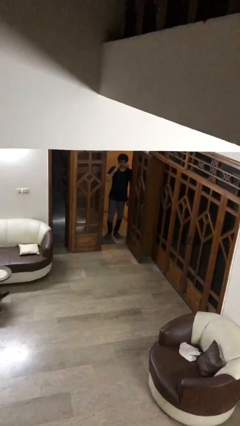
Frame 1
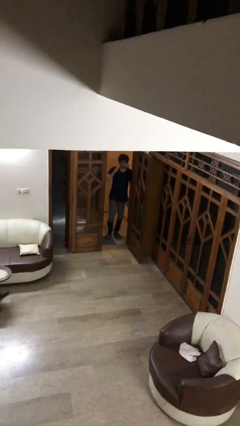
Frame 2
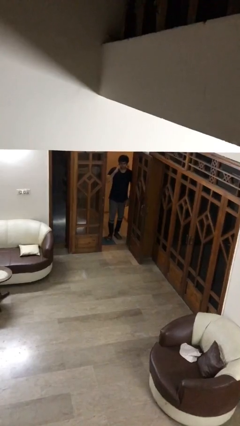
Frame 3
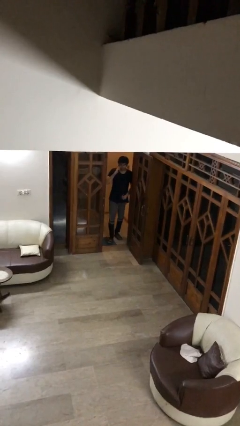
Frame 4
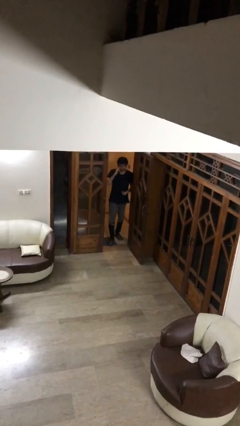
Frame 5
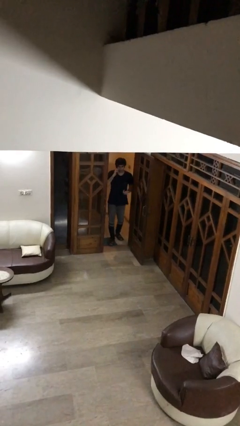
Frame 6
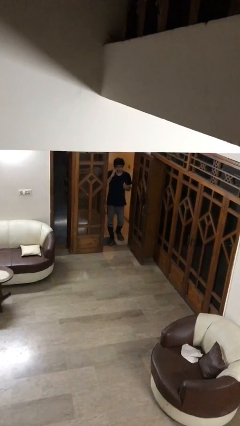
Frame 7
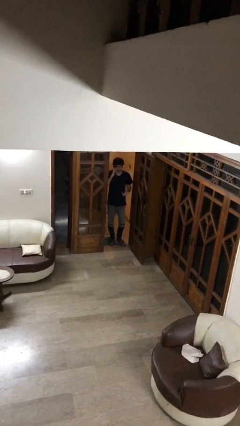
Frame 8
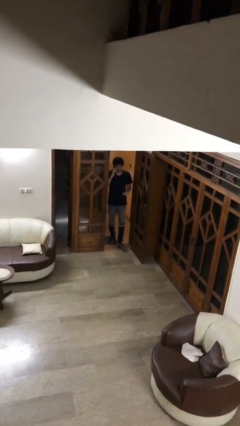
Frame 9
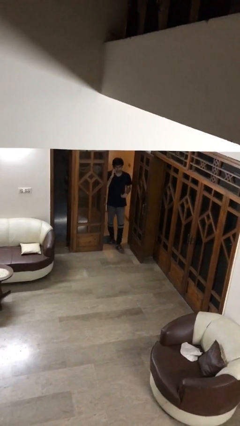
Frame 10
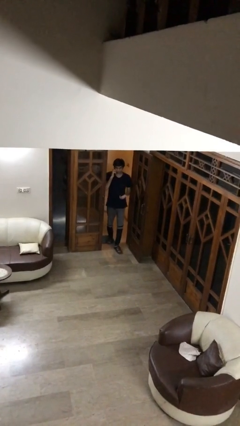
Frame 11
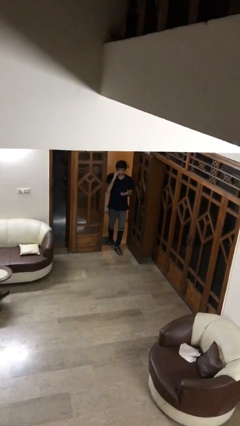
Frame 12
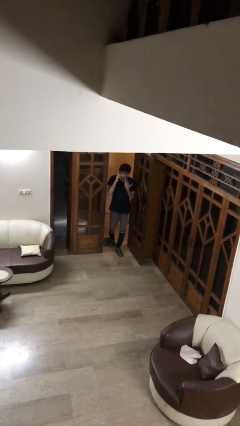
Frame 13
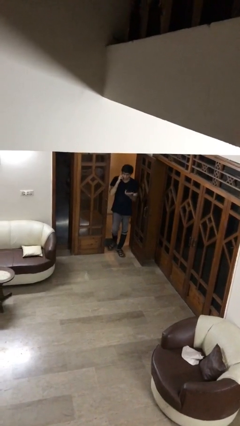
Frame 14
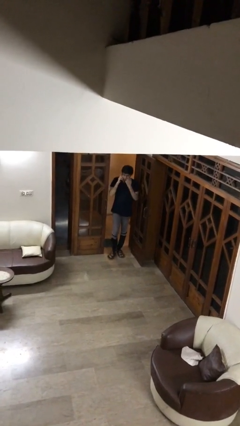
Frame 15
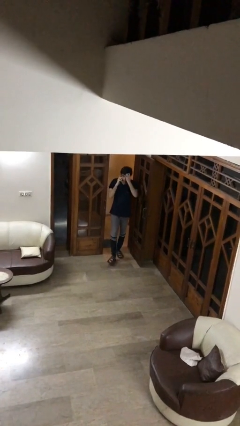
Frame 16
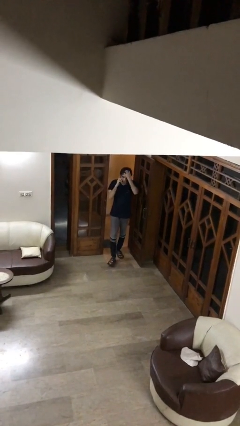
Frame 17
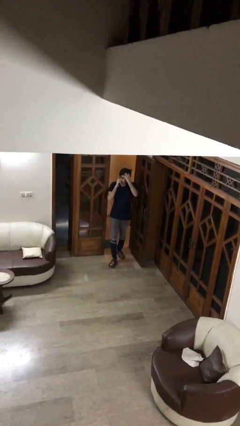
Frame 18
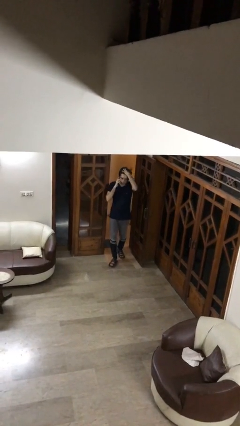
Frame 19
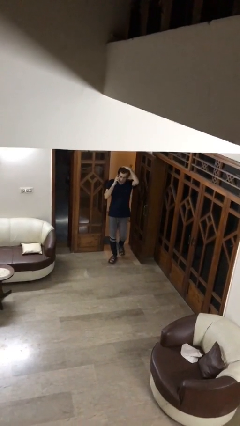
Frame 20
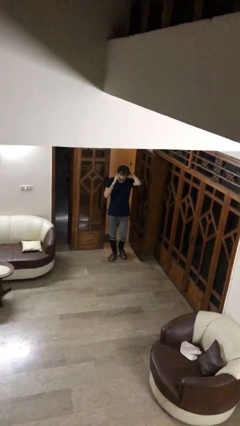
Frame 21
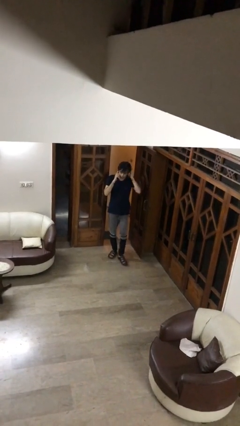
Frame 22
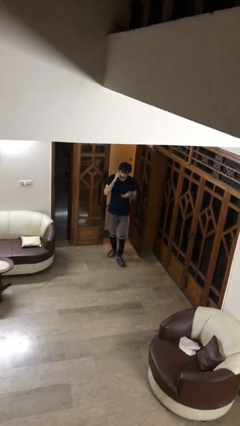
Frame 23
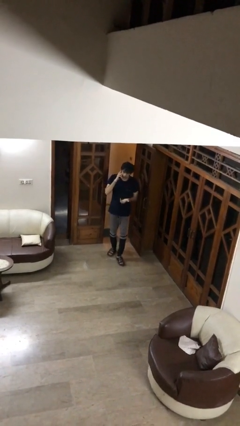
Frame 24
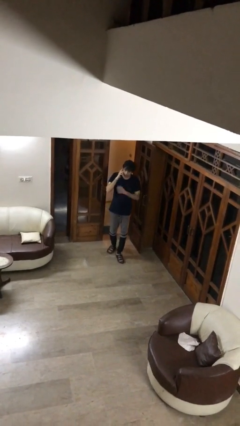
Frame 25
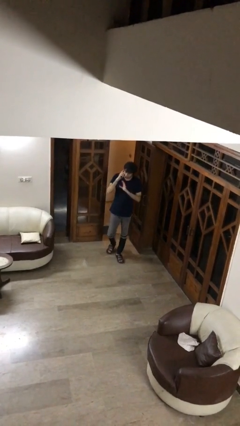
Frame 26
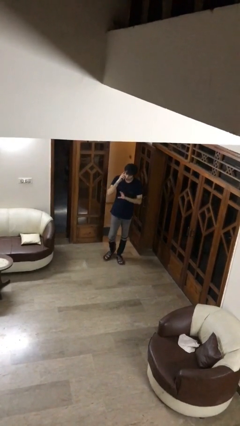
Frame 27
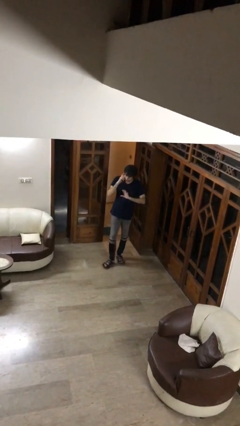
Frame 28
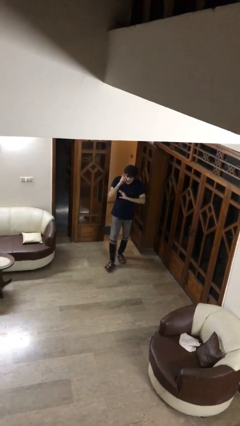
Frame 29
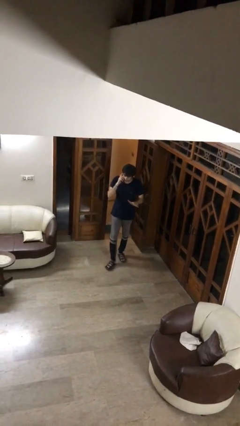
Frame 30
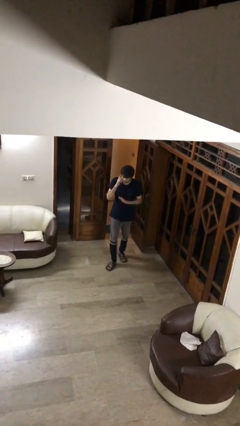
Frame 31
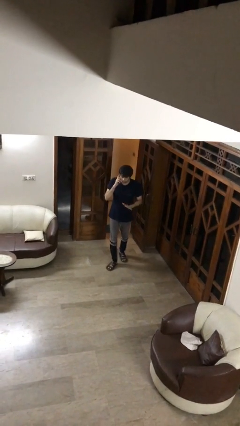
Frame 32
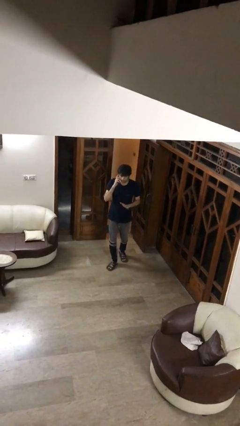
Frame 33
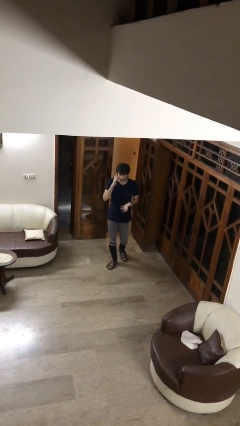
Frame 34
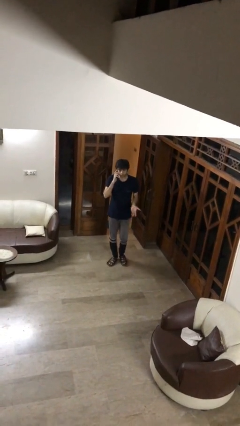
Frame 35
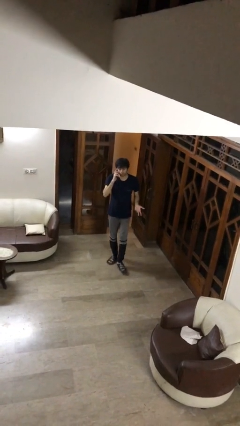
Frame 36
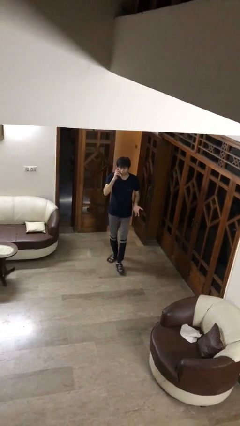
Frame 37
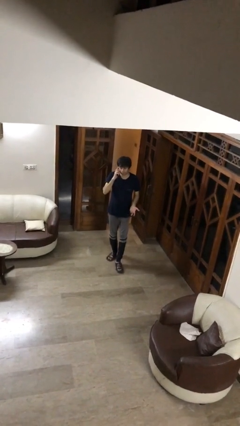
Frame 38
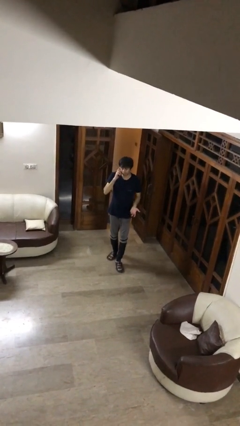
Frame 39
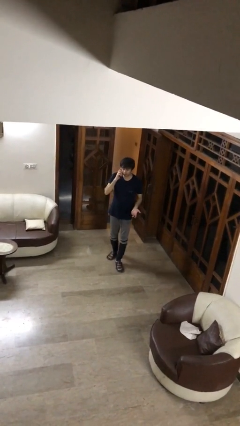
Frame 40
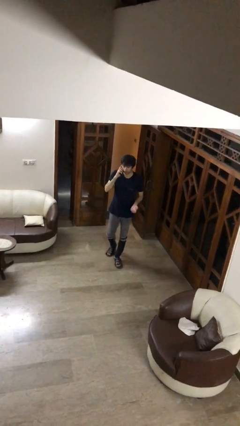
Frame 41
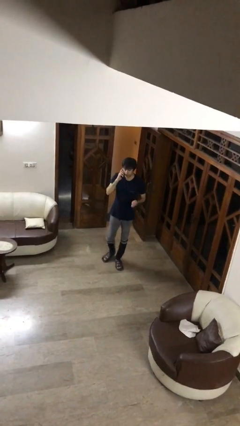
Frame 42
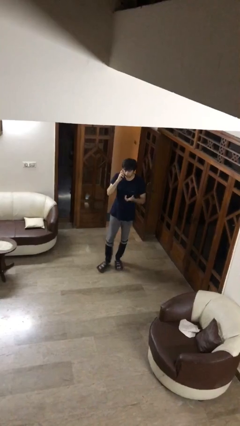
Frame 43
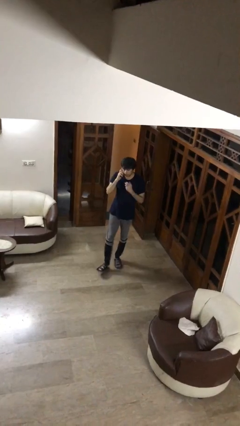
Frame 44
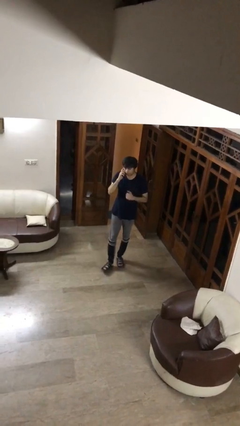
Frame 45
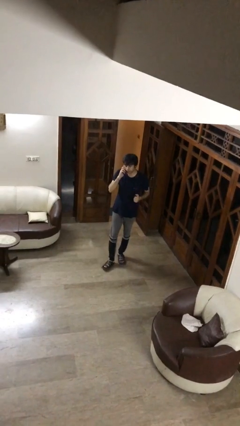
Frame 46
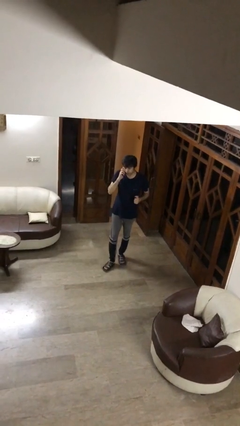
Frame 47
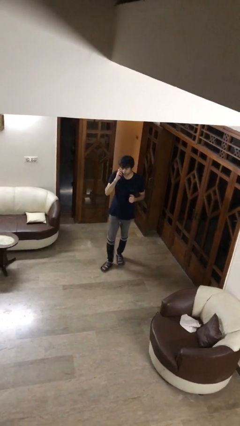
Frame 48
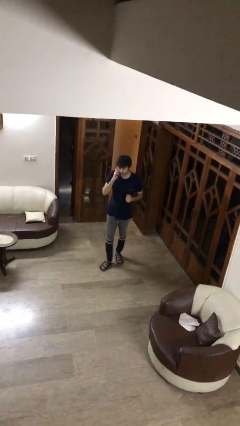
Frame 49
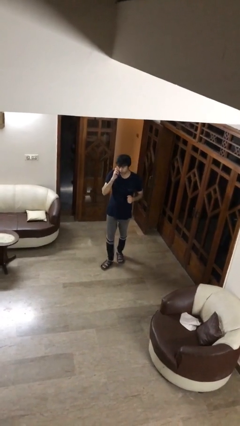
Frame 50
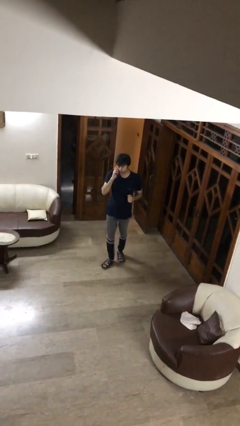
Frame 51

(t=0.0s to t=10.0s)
person enters scene through structure

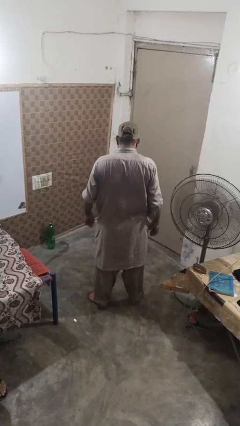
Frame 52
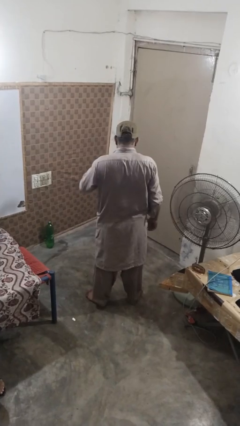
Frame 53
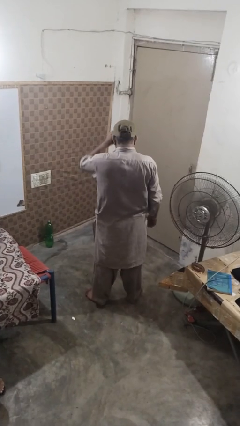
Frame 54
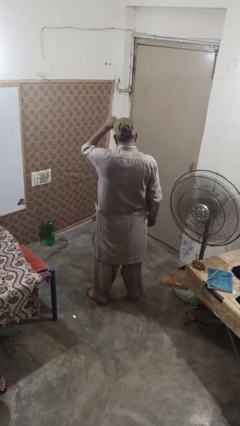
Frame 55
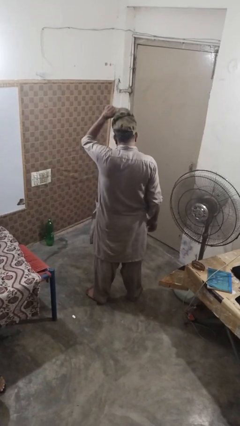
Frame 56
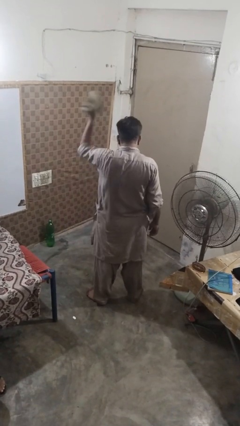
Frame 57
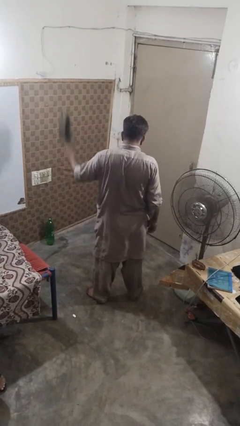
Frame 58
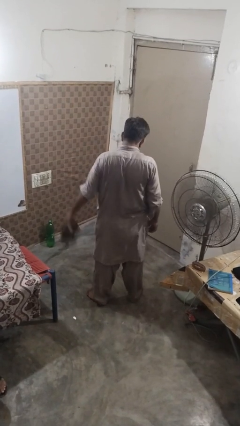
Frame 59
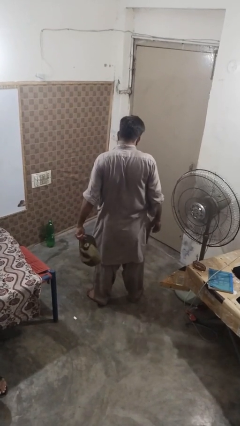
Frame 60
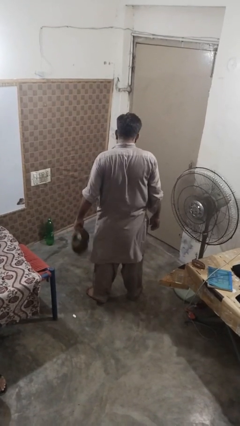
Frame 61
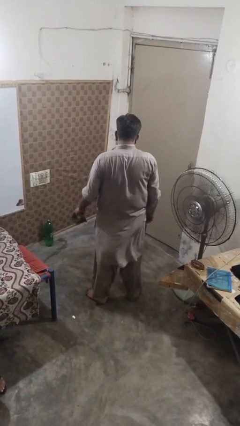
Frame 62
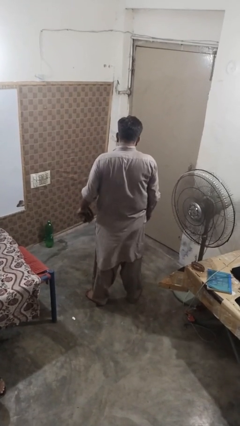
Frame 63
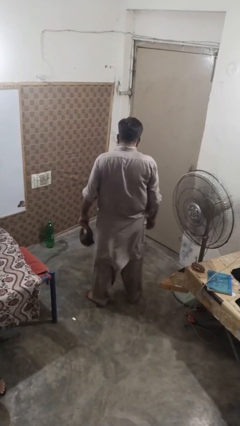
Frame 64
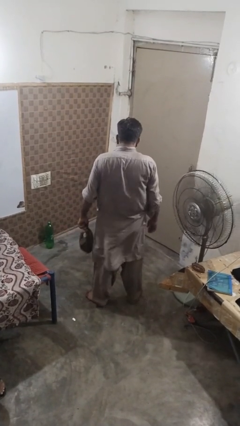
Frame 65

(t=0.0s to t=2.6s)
person takes off hat

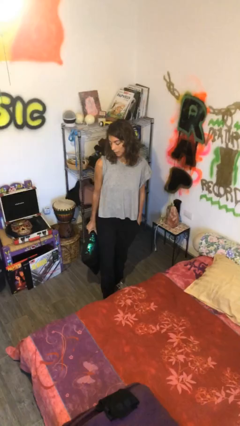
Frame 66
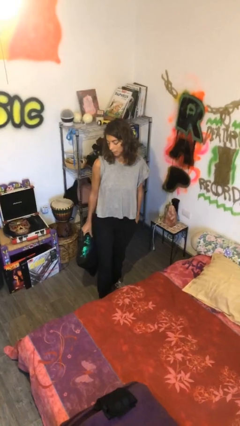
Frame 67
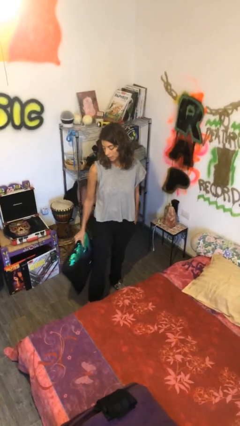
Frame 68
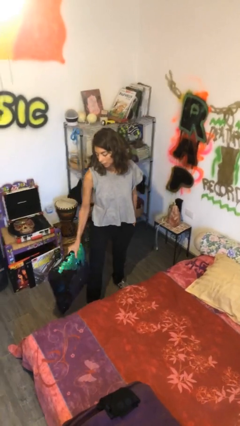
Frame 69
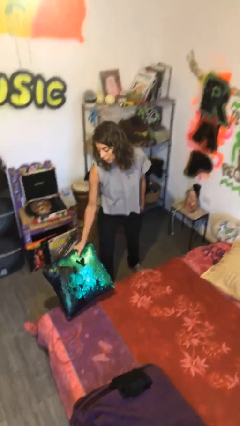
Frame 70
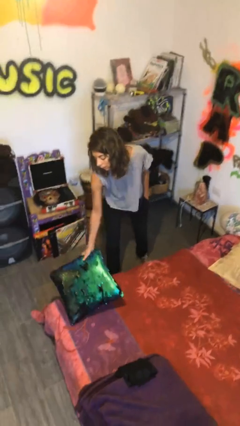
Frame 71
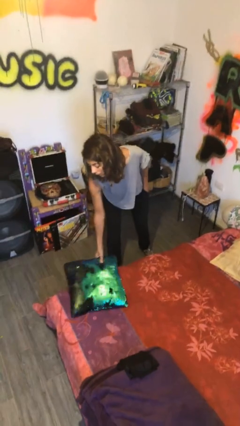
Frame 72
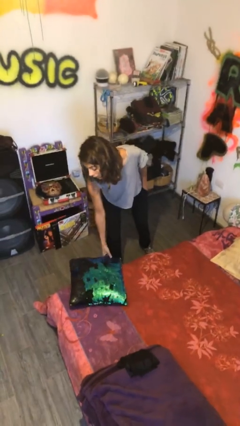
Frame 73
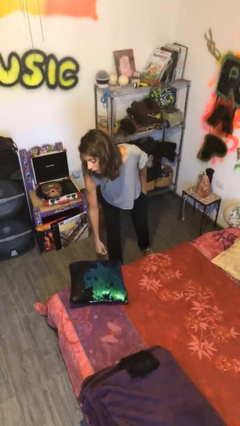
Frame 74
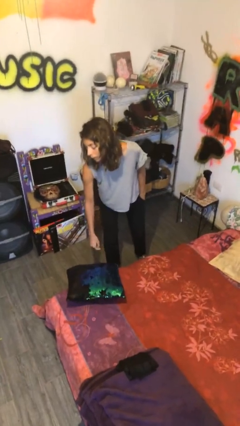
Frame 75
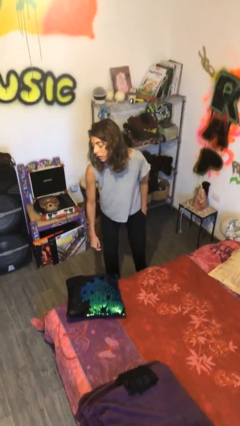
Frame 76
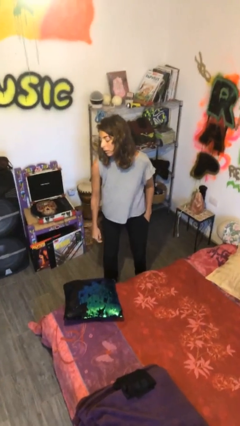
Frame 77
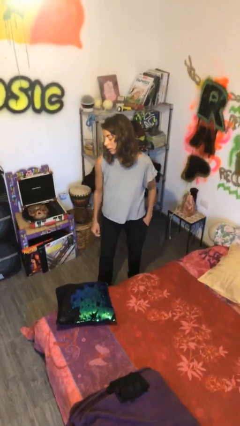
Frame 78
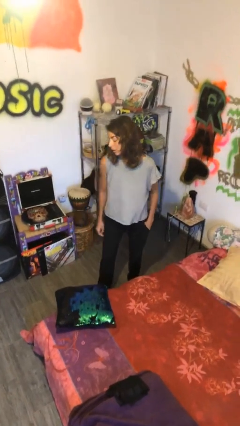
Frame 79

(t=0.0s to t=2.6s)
person puts down object on bed

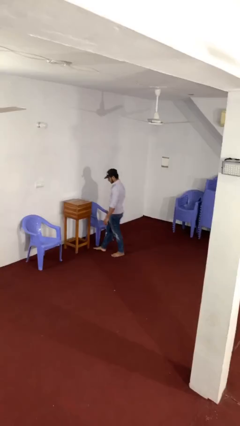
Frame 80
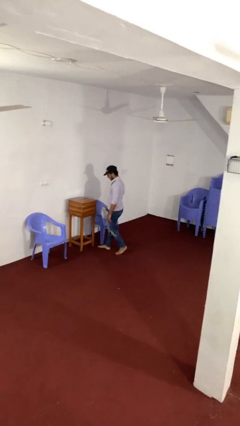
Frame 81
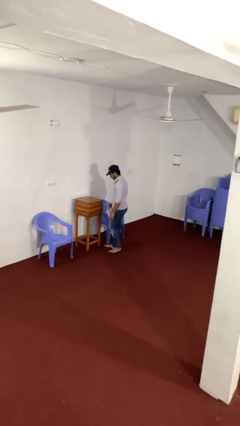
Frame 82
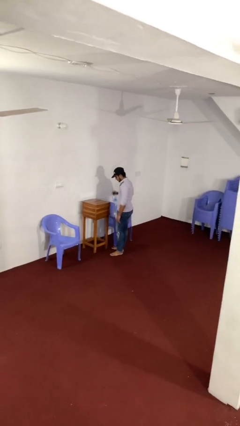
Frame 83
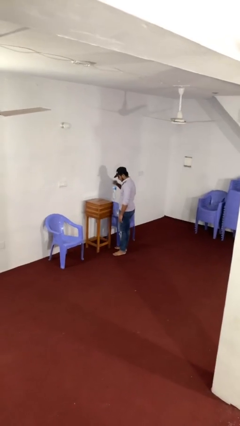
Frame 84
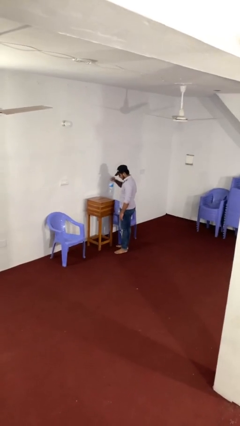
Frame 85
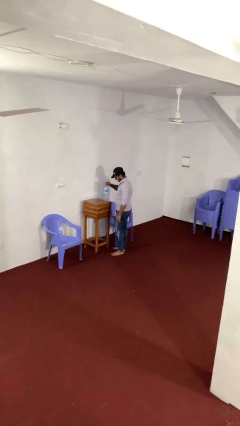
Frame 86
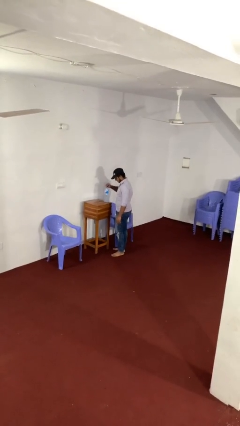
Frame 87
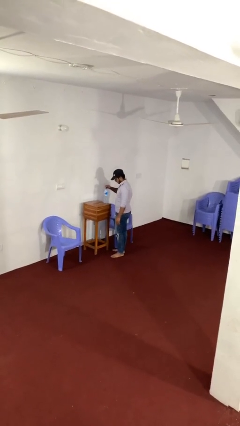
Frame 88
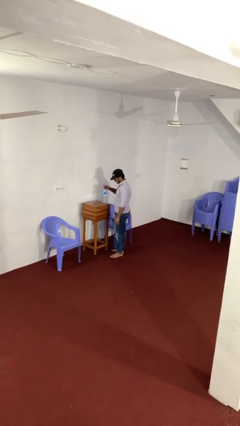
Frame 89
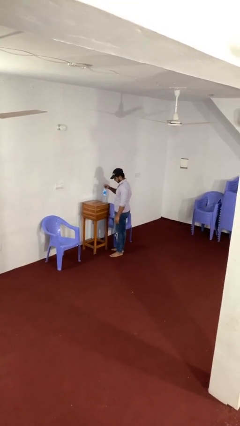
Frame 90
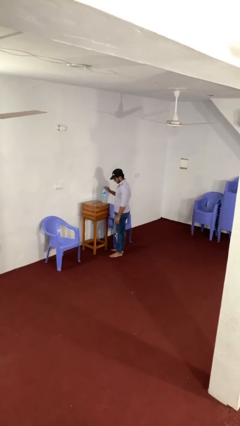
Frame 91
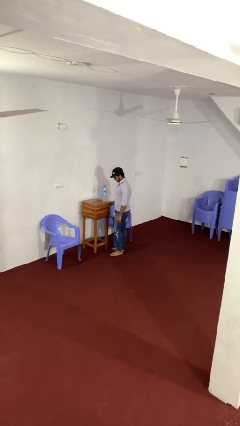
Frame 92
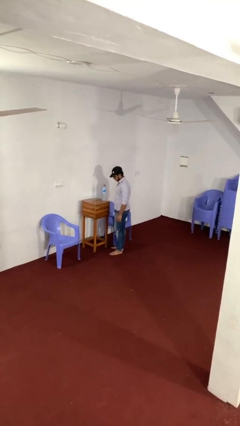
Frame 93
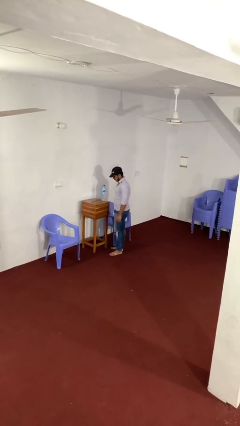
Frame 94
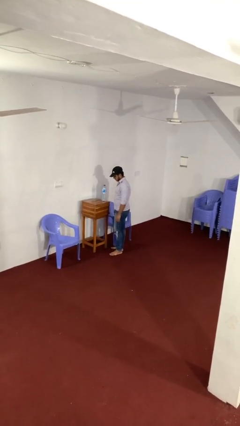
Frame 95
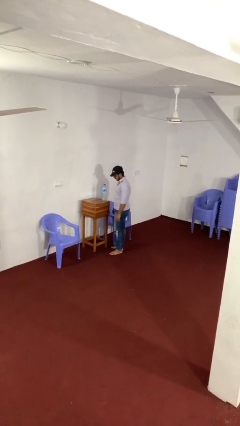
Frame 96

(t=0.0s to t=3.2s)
person puts down object on table
